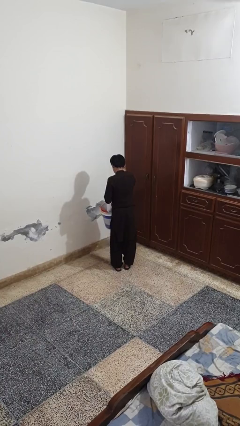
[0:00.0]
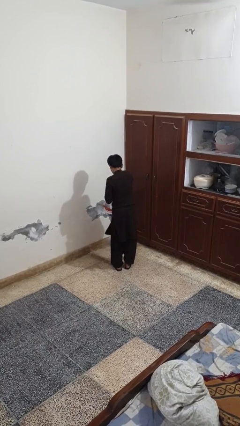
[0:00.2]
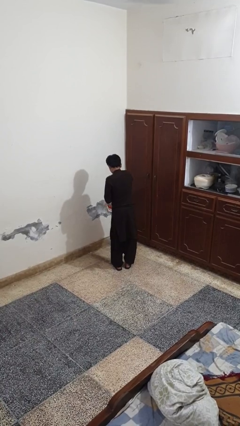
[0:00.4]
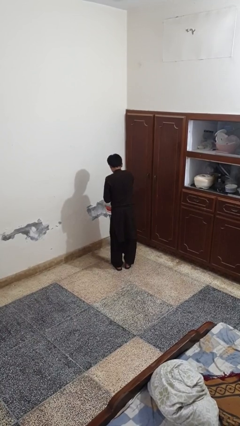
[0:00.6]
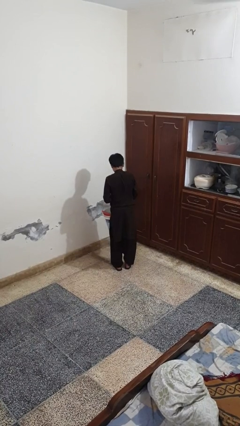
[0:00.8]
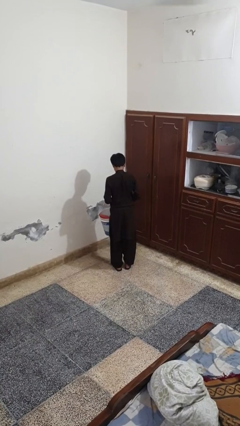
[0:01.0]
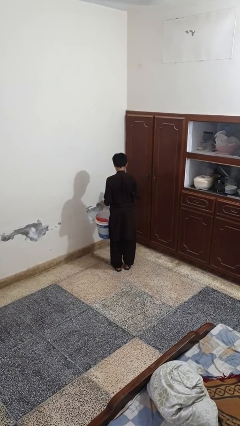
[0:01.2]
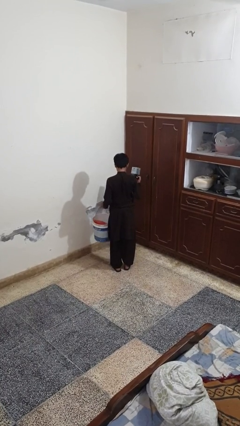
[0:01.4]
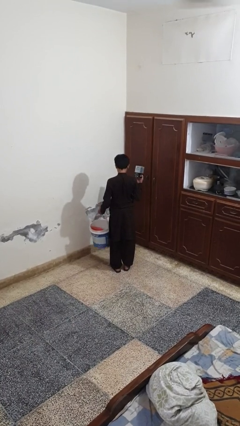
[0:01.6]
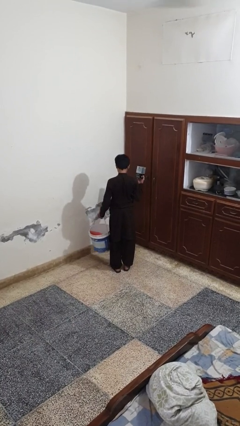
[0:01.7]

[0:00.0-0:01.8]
person takes object from basket

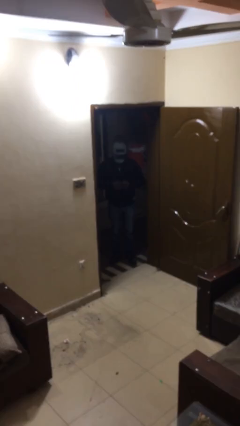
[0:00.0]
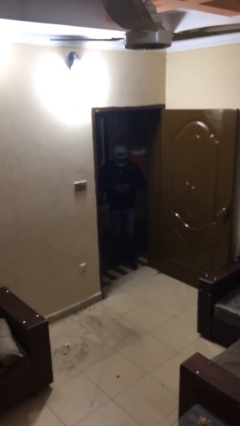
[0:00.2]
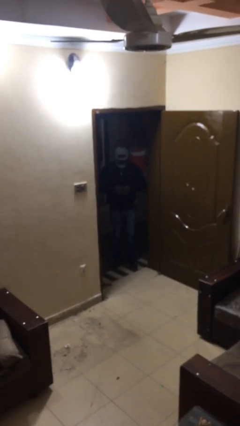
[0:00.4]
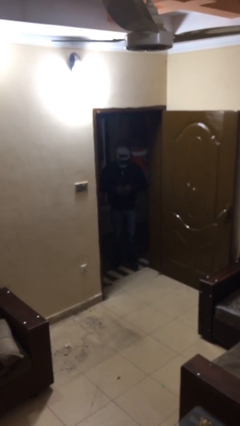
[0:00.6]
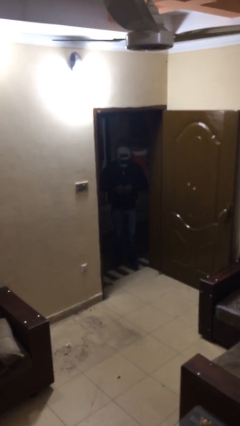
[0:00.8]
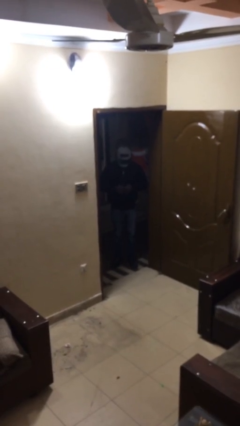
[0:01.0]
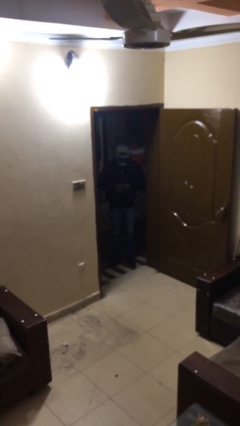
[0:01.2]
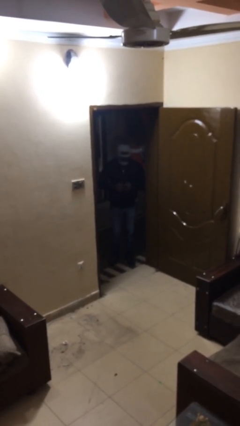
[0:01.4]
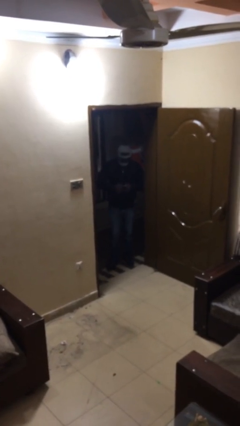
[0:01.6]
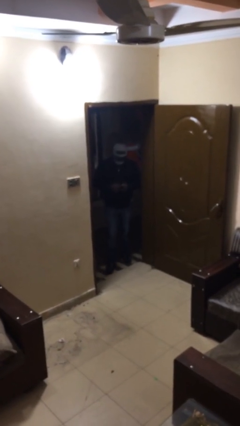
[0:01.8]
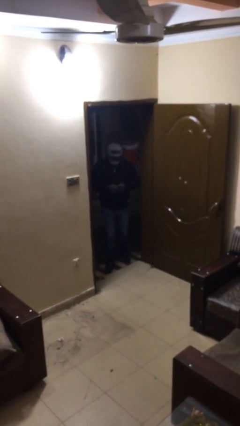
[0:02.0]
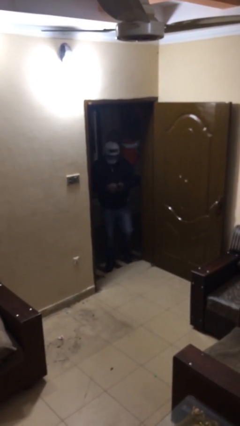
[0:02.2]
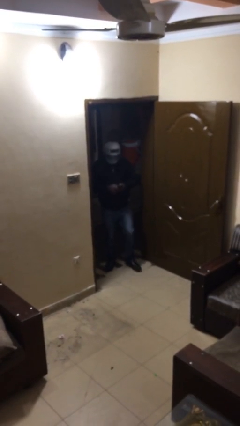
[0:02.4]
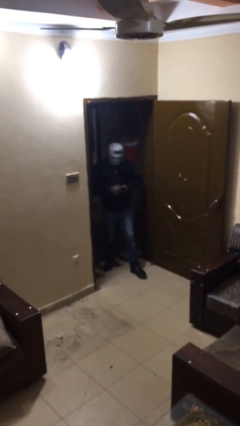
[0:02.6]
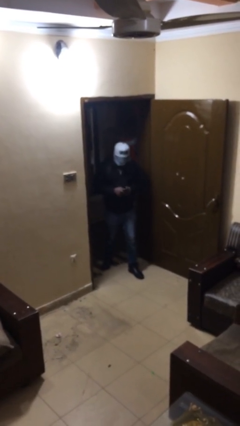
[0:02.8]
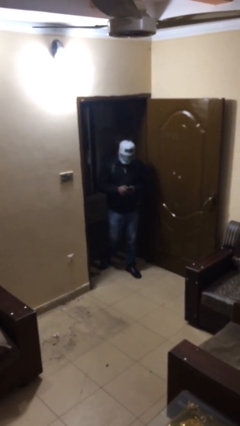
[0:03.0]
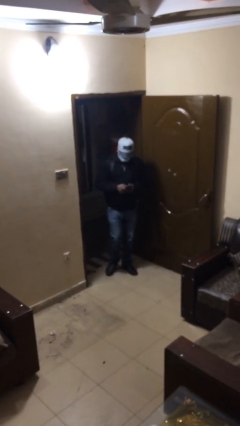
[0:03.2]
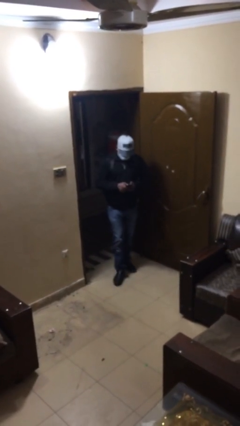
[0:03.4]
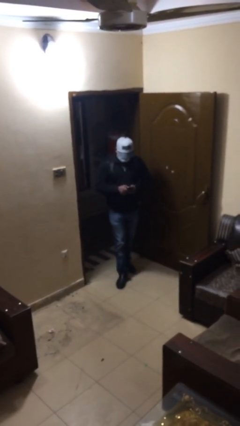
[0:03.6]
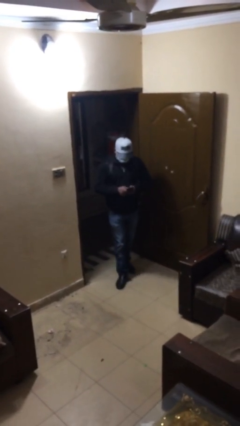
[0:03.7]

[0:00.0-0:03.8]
person enters scene through structure

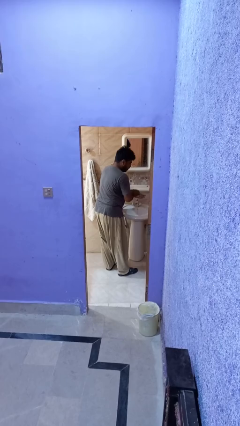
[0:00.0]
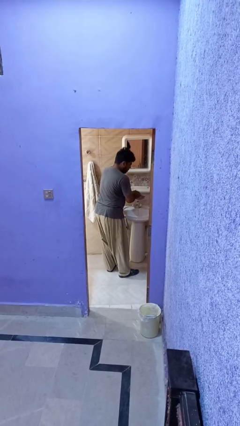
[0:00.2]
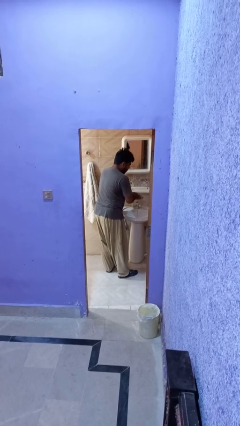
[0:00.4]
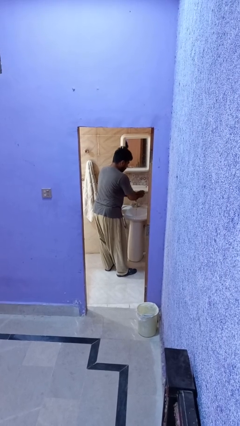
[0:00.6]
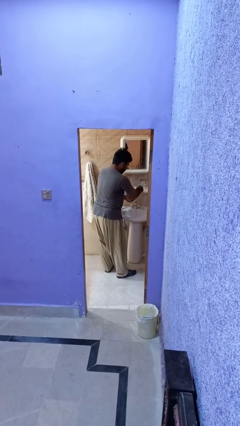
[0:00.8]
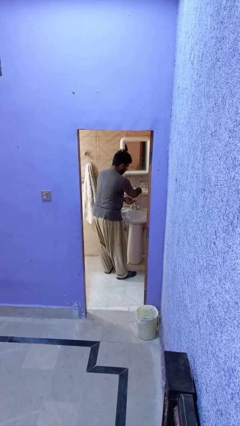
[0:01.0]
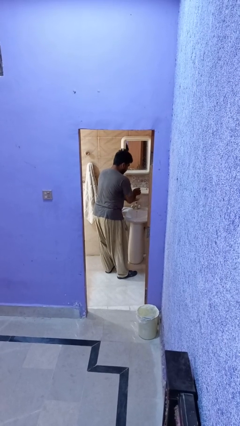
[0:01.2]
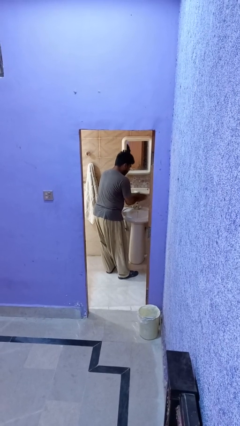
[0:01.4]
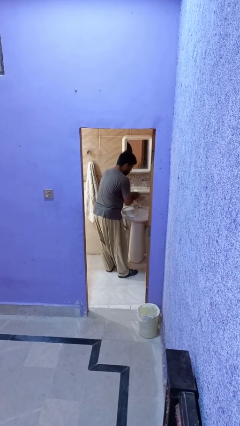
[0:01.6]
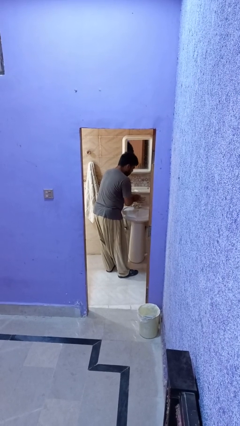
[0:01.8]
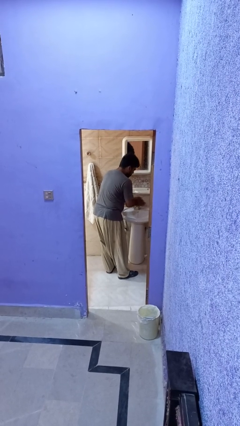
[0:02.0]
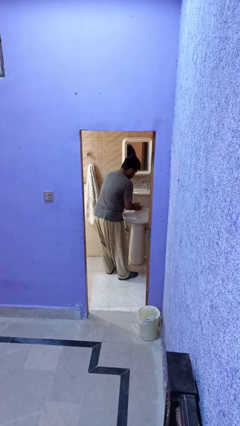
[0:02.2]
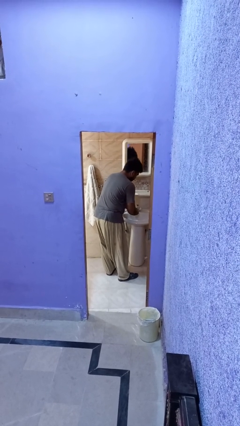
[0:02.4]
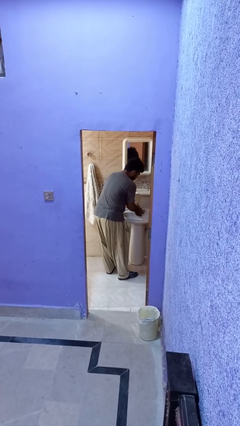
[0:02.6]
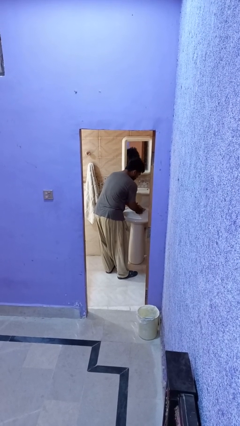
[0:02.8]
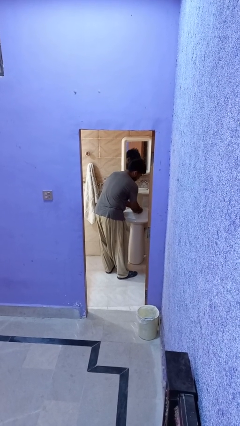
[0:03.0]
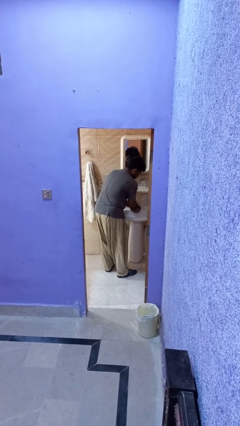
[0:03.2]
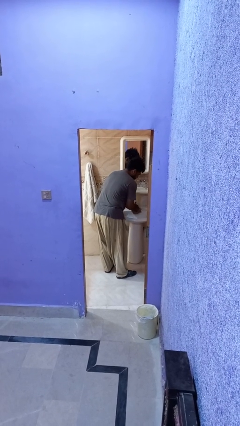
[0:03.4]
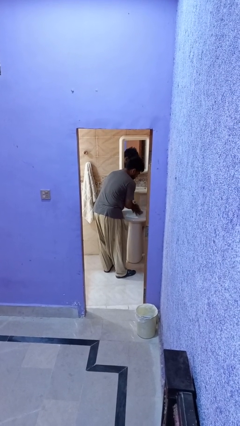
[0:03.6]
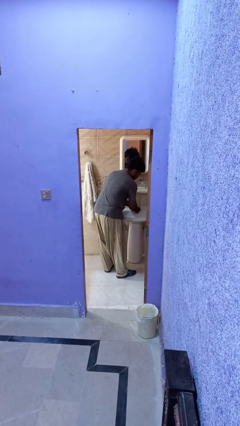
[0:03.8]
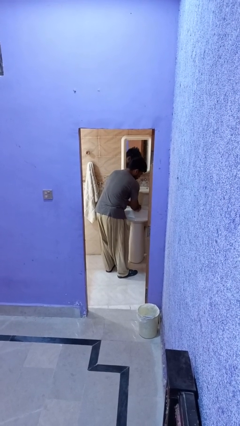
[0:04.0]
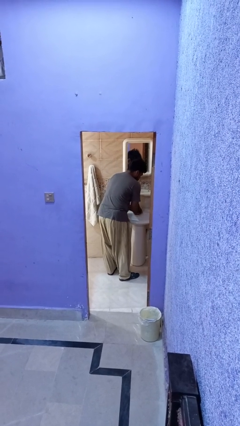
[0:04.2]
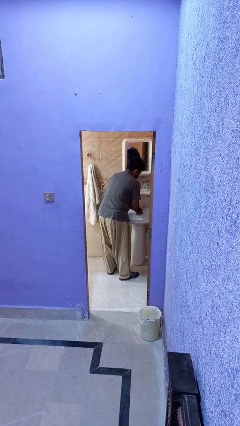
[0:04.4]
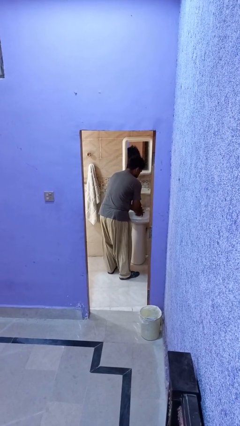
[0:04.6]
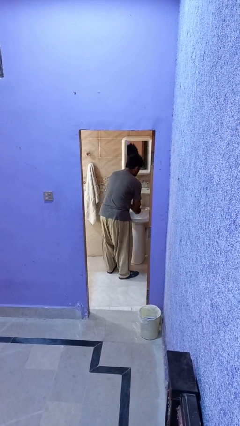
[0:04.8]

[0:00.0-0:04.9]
person washes hands

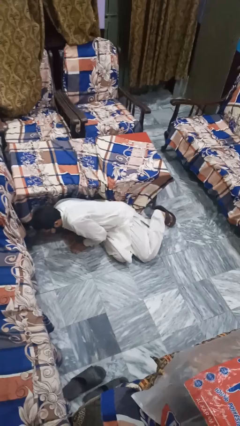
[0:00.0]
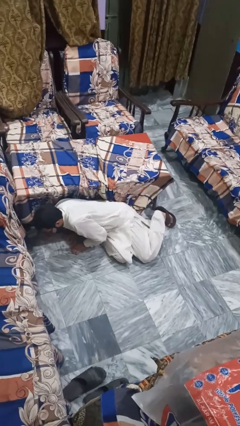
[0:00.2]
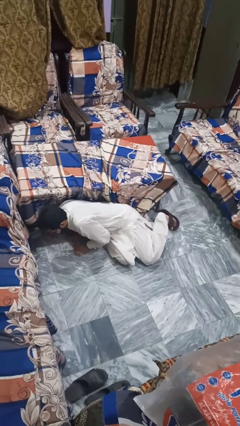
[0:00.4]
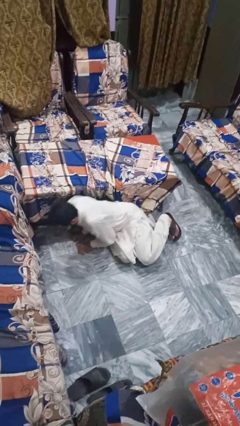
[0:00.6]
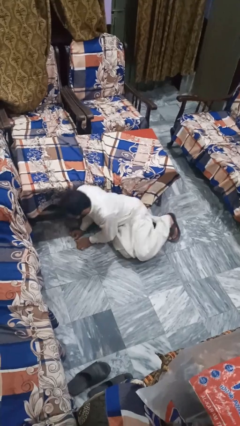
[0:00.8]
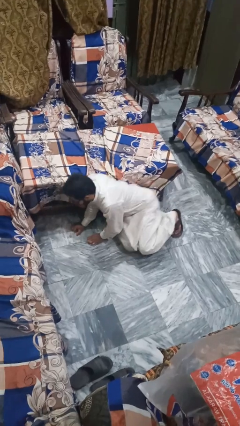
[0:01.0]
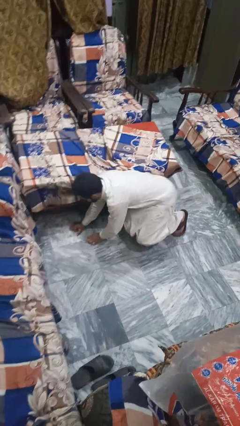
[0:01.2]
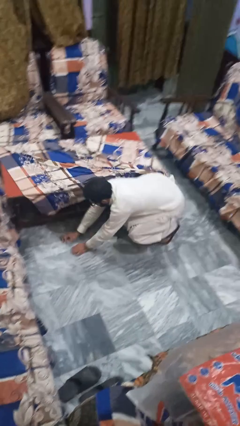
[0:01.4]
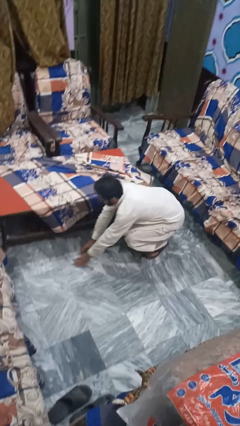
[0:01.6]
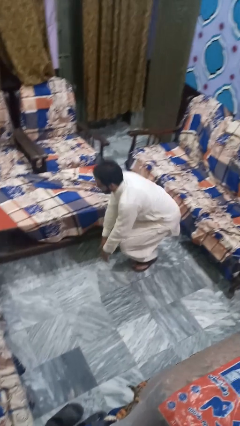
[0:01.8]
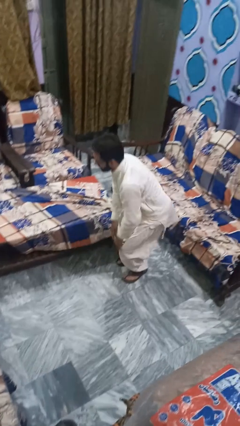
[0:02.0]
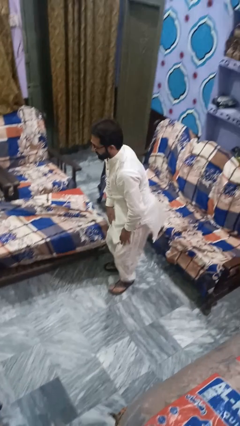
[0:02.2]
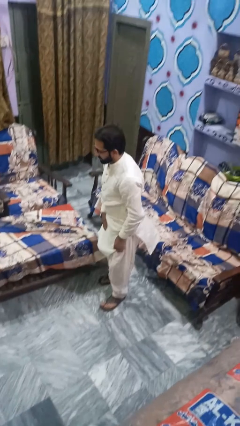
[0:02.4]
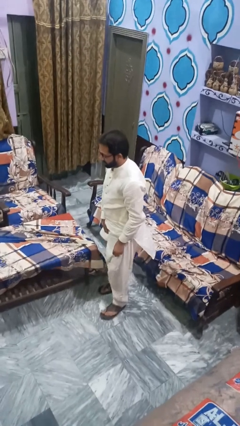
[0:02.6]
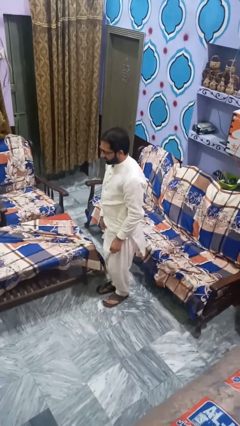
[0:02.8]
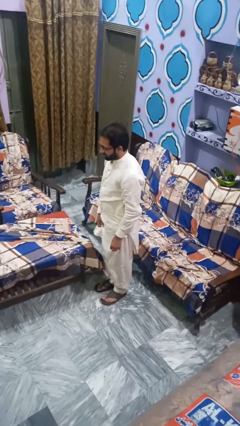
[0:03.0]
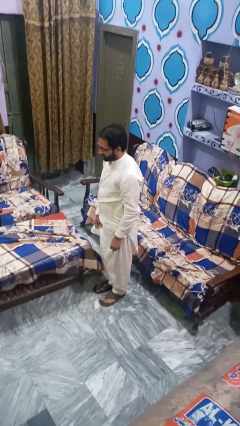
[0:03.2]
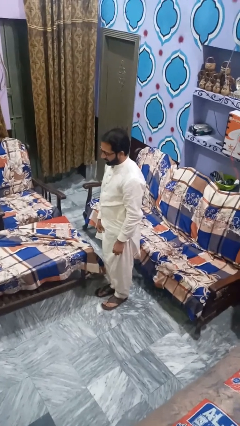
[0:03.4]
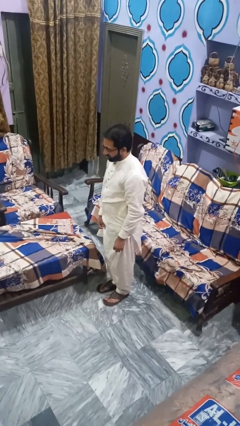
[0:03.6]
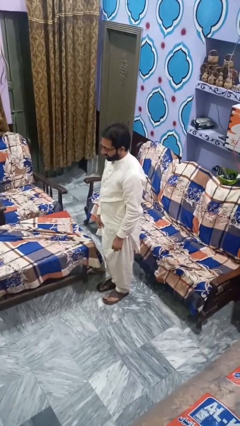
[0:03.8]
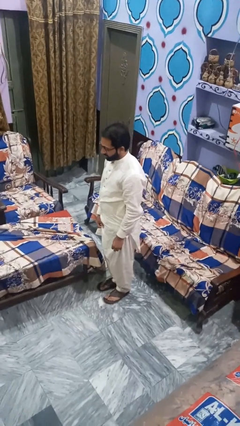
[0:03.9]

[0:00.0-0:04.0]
person stands up from floor

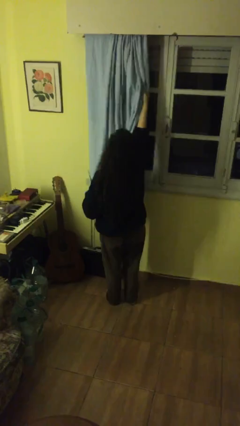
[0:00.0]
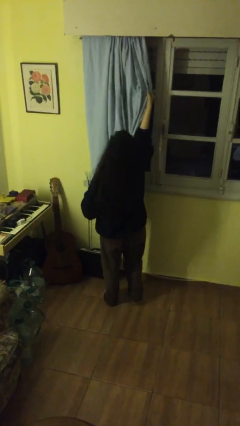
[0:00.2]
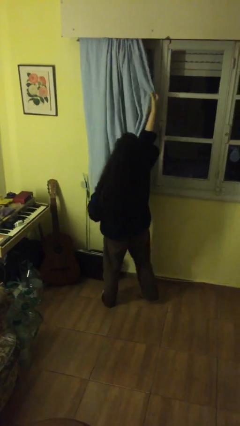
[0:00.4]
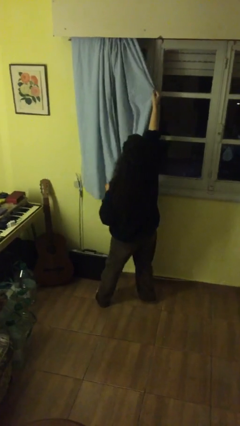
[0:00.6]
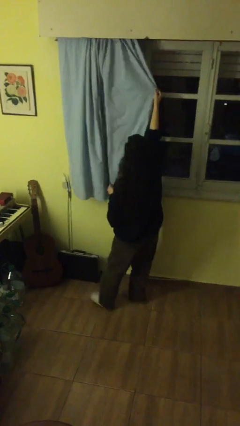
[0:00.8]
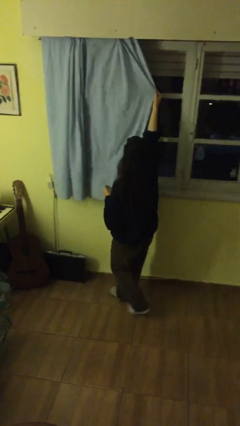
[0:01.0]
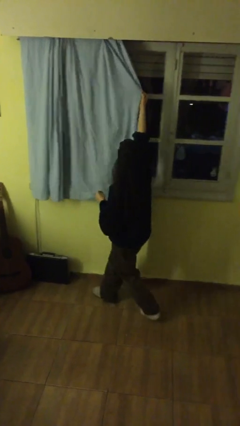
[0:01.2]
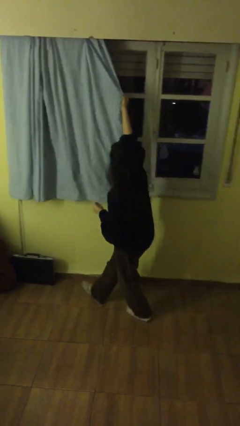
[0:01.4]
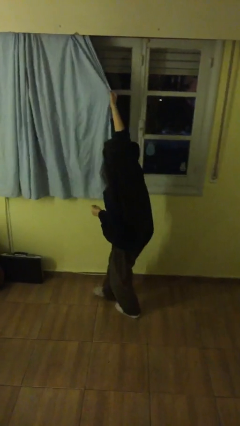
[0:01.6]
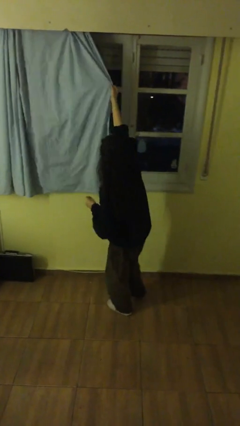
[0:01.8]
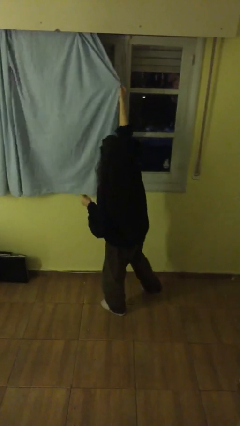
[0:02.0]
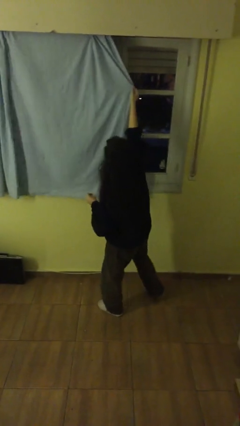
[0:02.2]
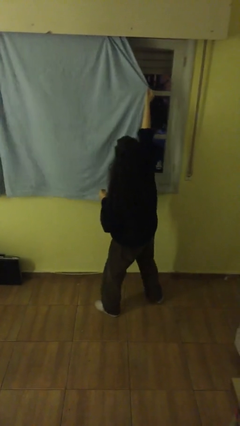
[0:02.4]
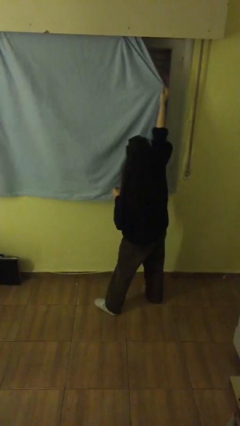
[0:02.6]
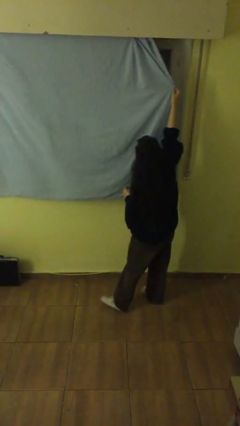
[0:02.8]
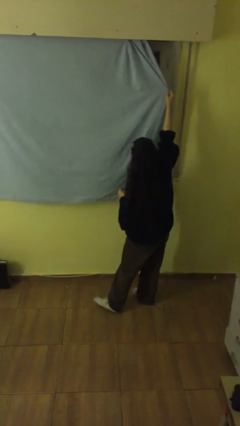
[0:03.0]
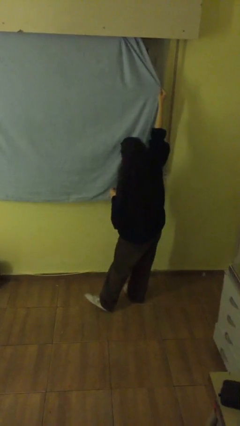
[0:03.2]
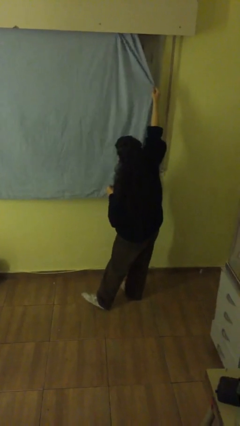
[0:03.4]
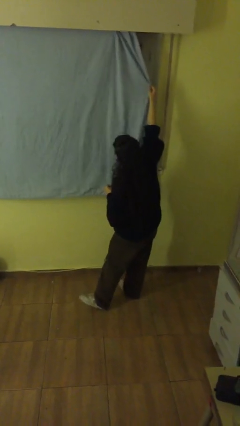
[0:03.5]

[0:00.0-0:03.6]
person closes curtains
